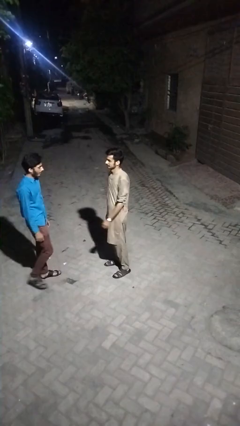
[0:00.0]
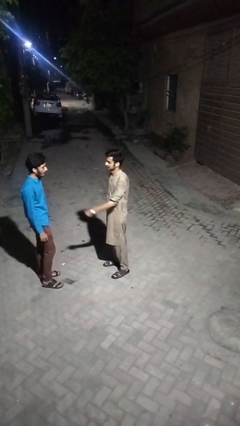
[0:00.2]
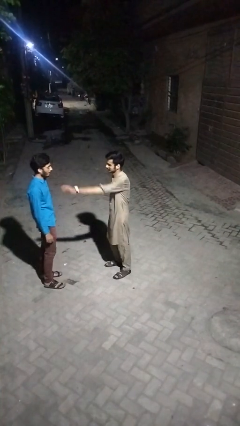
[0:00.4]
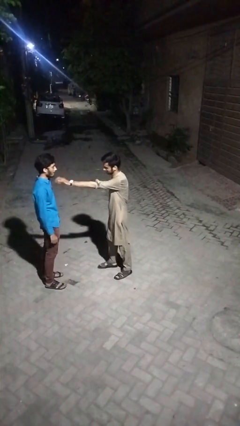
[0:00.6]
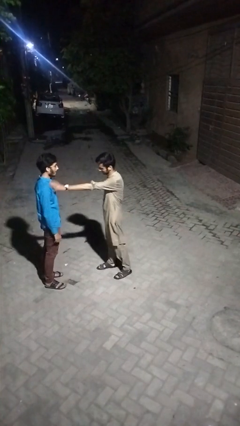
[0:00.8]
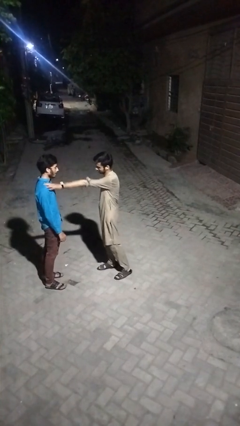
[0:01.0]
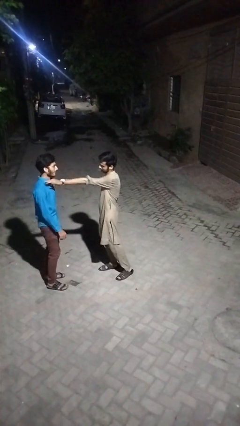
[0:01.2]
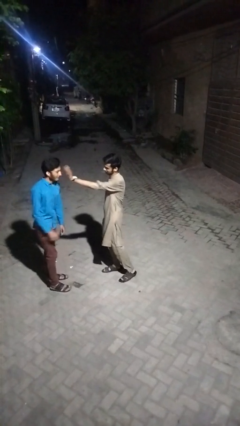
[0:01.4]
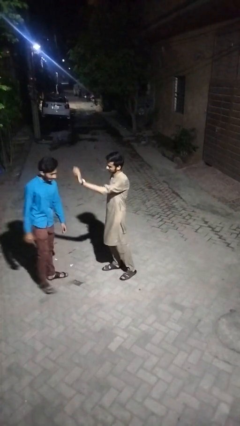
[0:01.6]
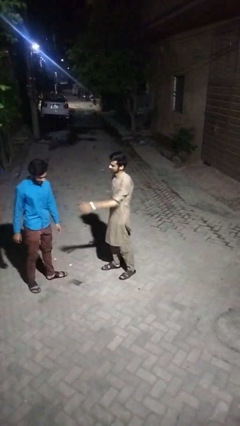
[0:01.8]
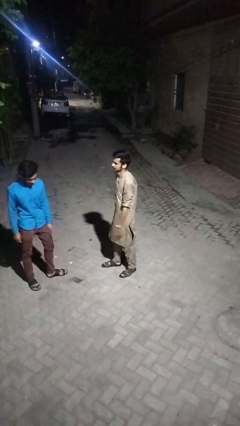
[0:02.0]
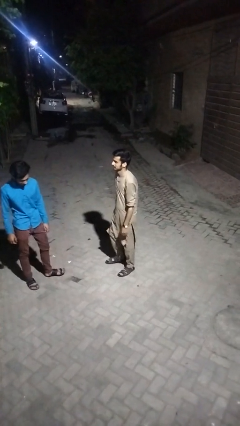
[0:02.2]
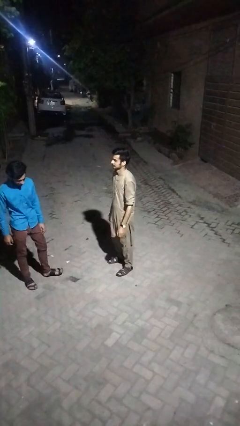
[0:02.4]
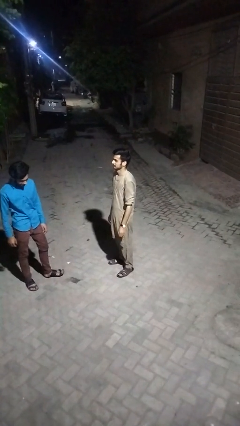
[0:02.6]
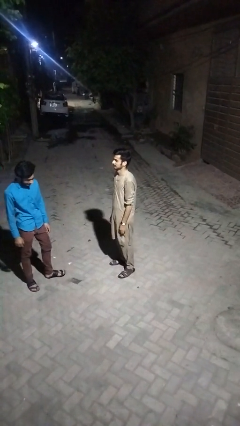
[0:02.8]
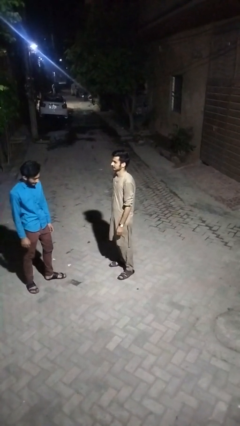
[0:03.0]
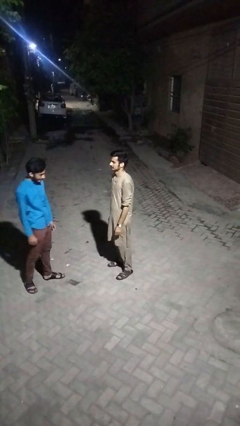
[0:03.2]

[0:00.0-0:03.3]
person shoves person

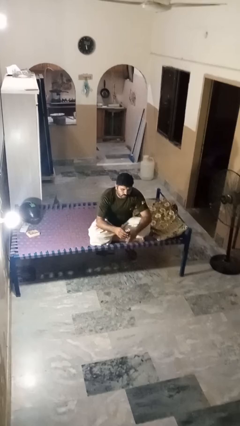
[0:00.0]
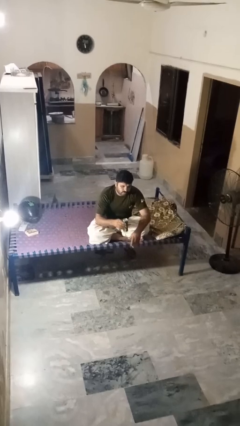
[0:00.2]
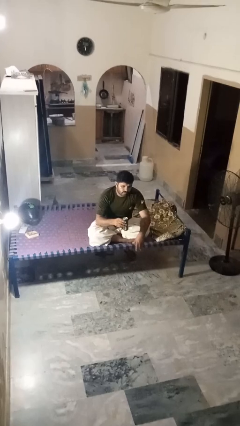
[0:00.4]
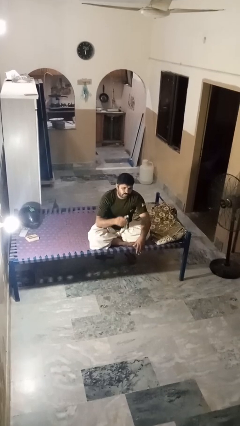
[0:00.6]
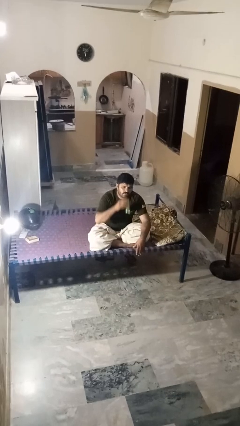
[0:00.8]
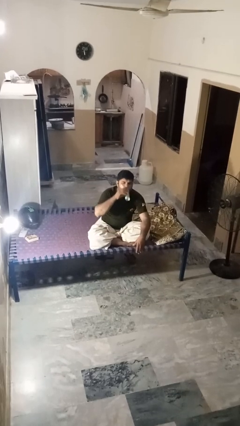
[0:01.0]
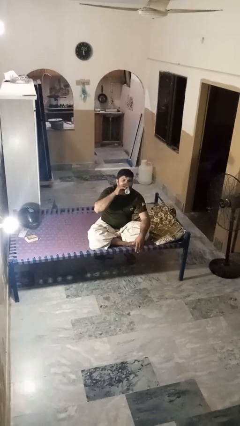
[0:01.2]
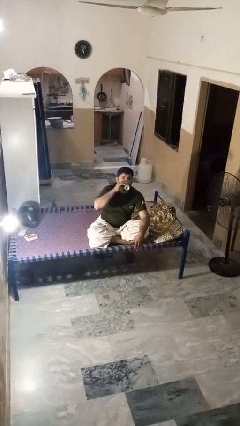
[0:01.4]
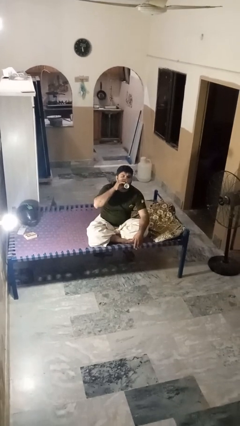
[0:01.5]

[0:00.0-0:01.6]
person drinks from beverage can

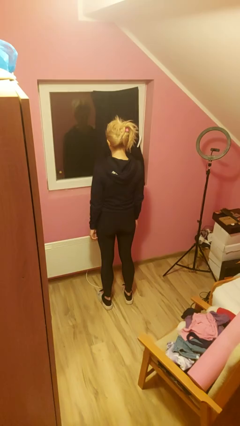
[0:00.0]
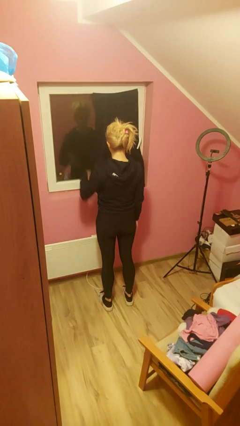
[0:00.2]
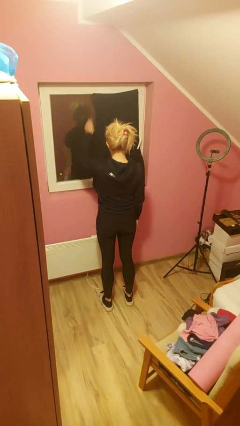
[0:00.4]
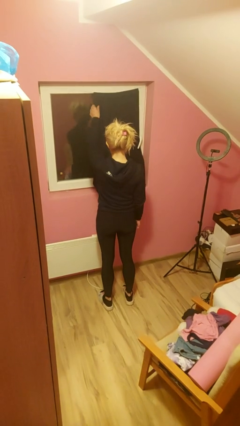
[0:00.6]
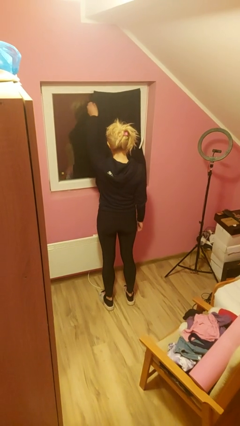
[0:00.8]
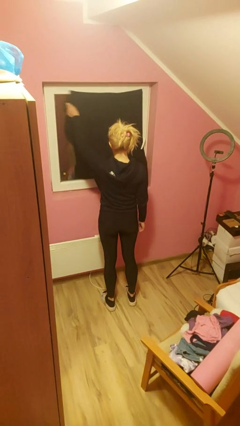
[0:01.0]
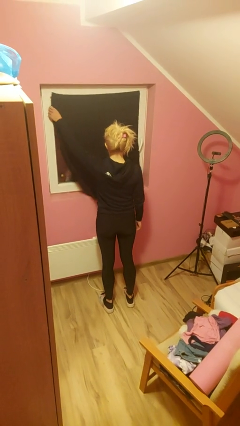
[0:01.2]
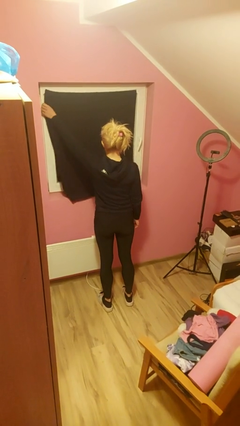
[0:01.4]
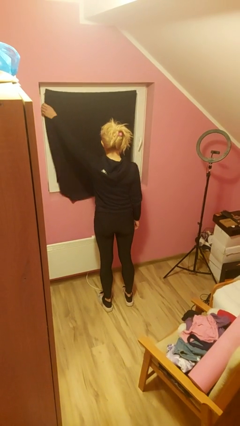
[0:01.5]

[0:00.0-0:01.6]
person closes curtains

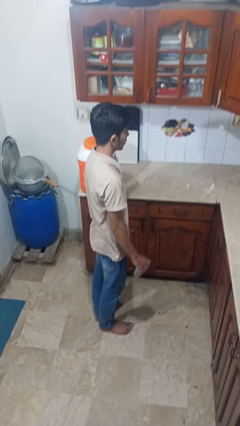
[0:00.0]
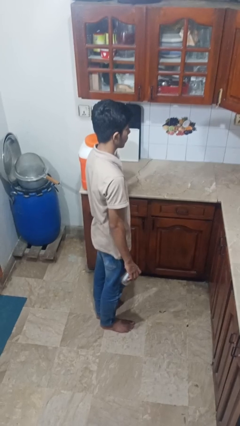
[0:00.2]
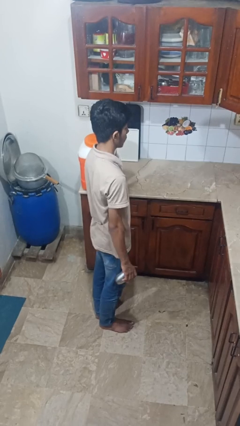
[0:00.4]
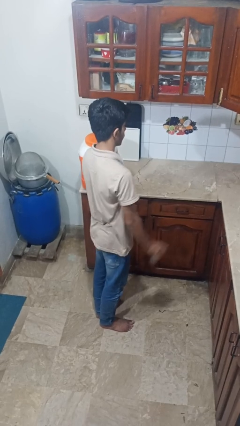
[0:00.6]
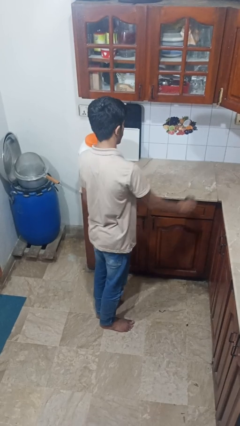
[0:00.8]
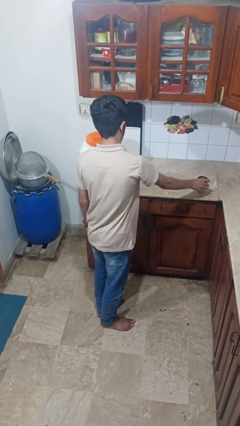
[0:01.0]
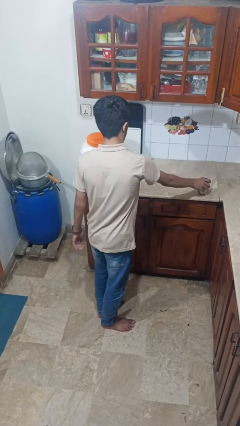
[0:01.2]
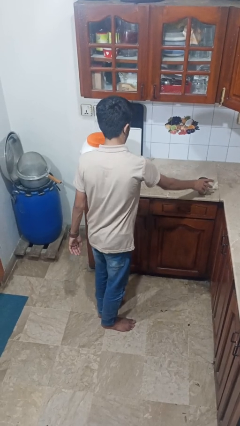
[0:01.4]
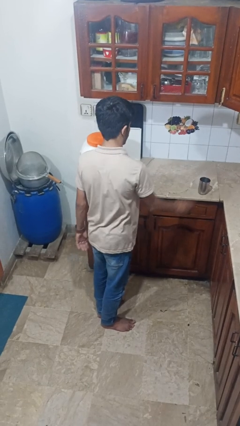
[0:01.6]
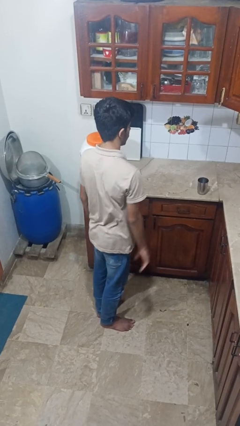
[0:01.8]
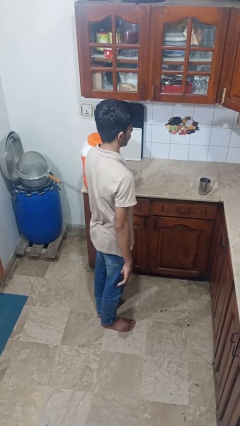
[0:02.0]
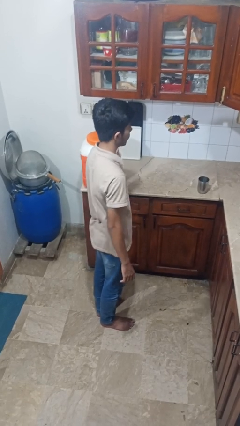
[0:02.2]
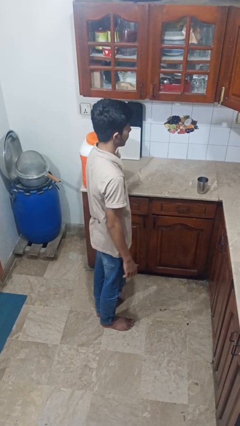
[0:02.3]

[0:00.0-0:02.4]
person puts down object on countertop

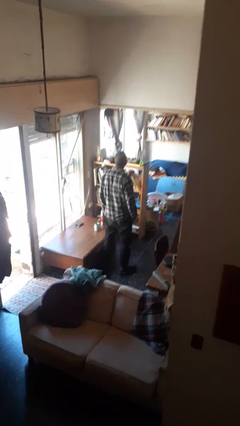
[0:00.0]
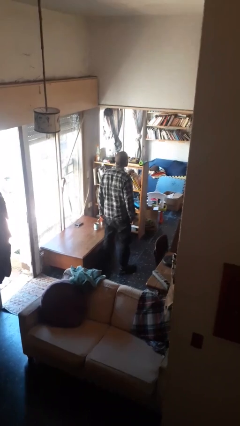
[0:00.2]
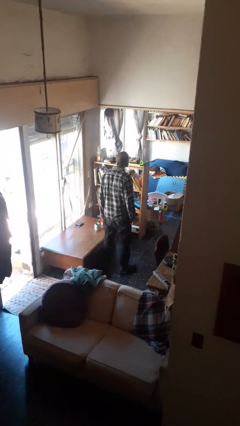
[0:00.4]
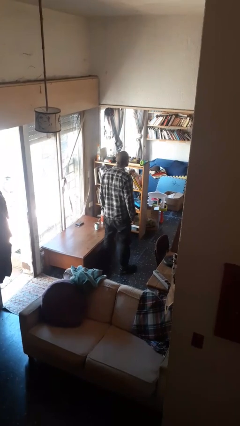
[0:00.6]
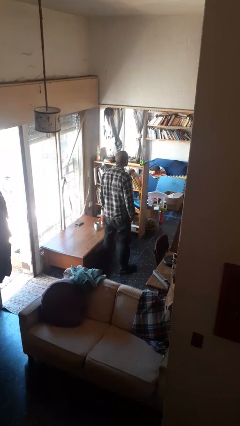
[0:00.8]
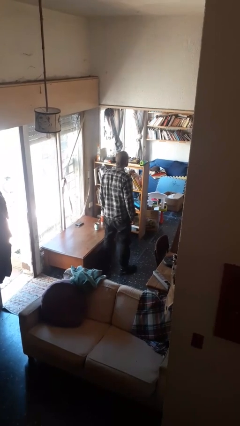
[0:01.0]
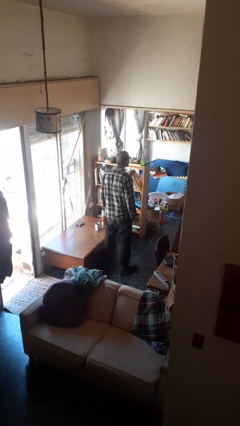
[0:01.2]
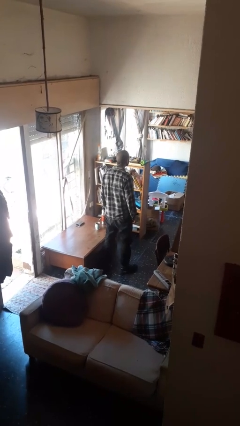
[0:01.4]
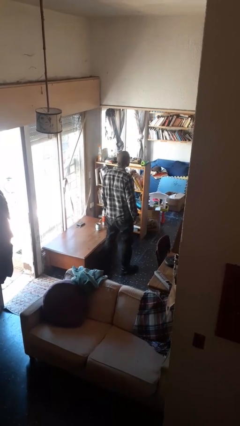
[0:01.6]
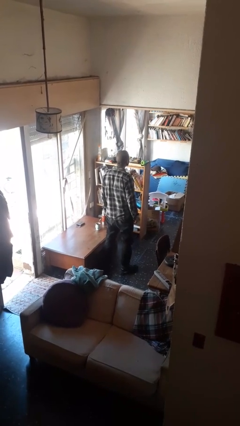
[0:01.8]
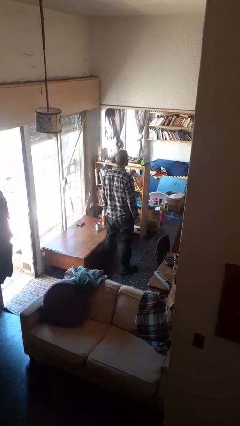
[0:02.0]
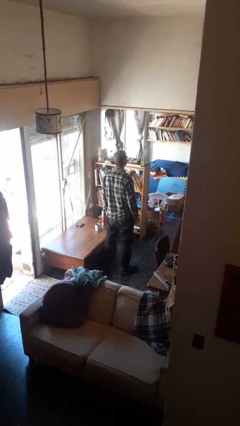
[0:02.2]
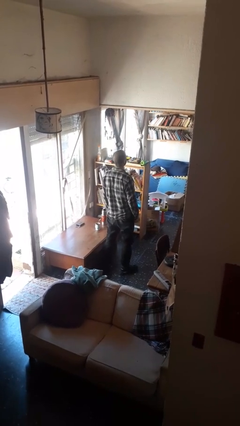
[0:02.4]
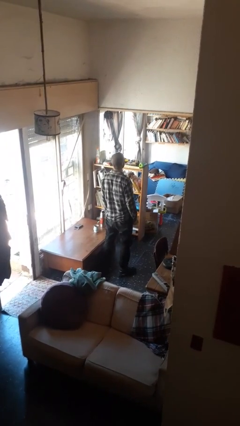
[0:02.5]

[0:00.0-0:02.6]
person sticks out tongue

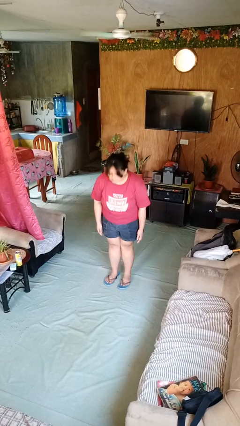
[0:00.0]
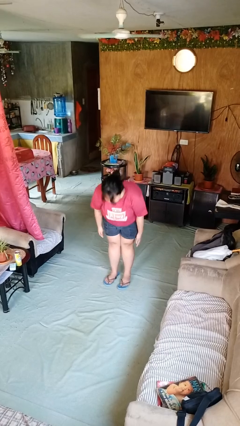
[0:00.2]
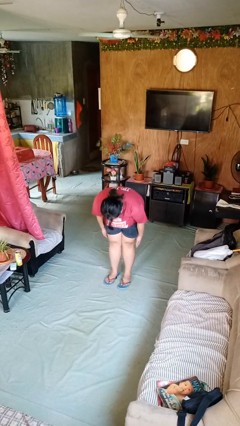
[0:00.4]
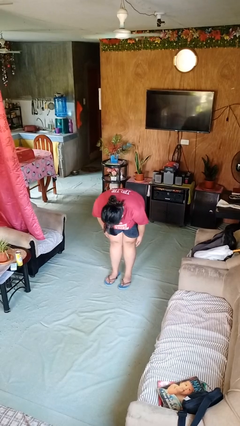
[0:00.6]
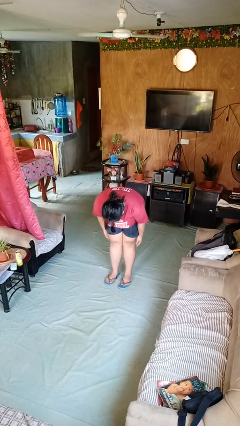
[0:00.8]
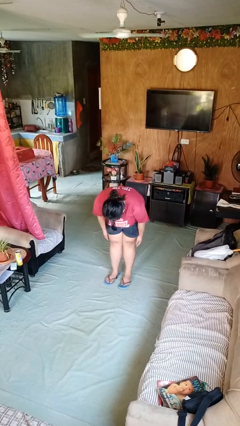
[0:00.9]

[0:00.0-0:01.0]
person bows

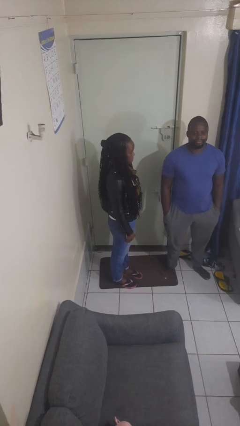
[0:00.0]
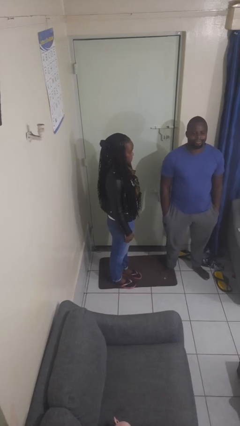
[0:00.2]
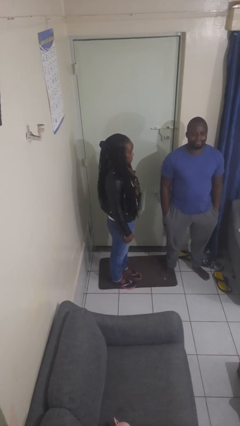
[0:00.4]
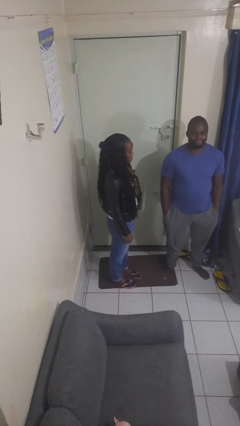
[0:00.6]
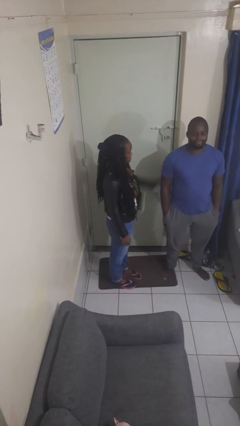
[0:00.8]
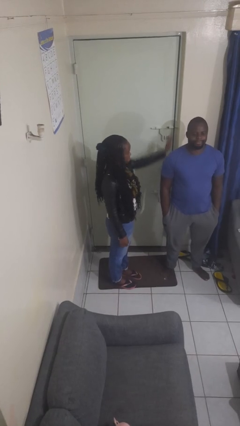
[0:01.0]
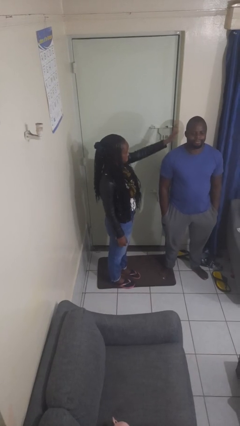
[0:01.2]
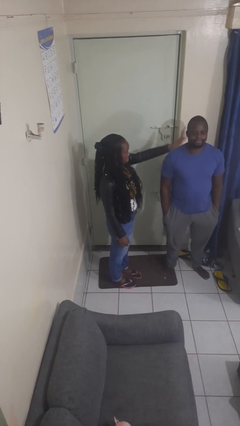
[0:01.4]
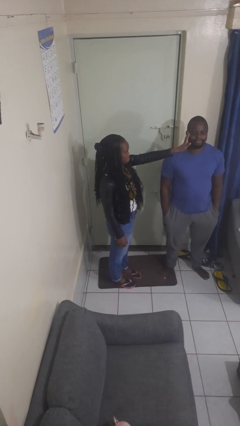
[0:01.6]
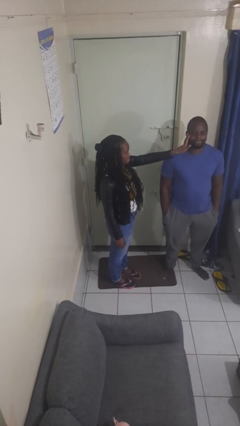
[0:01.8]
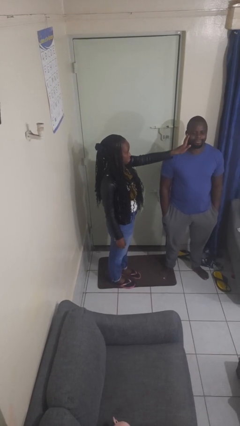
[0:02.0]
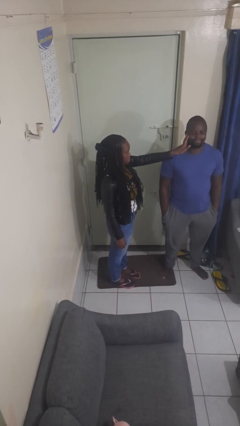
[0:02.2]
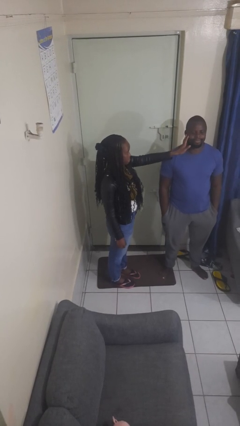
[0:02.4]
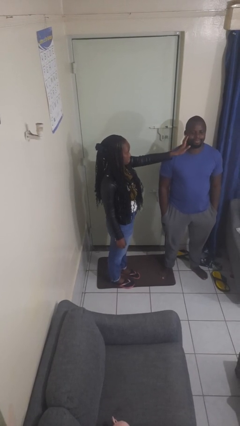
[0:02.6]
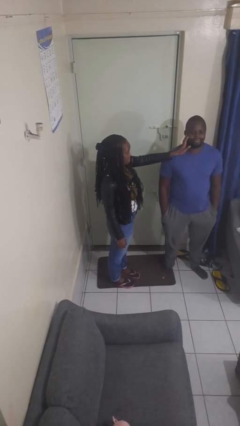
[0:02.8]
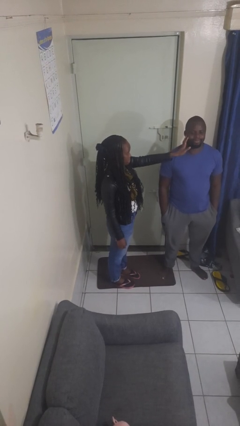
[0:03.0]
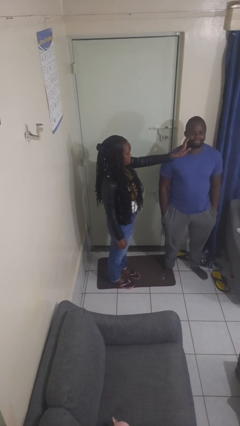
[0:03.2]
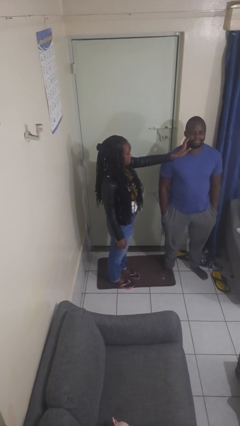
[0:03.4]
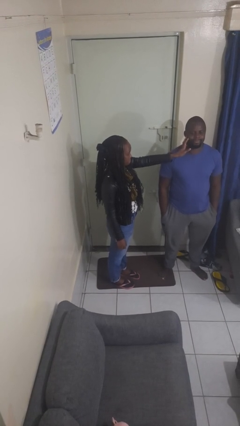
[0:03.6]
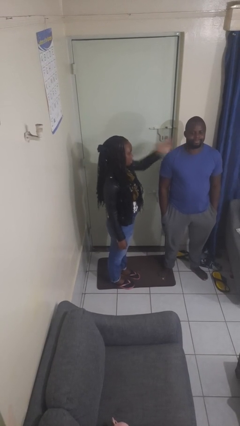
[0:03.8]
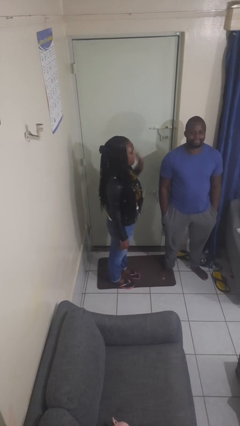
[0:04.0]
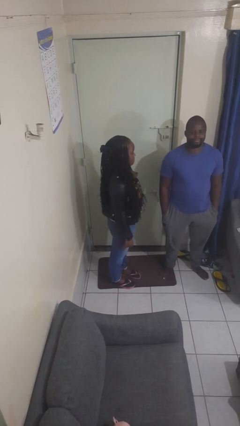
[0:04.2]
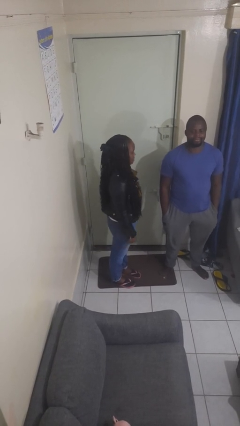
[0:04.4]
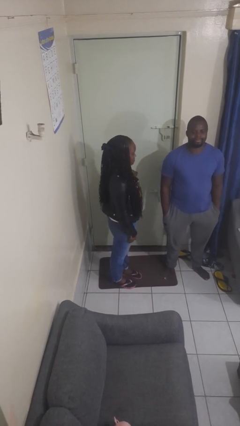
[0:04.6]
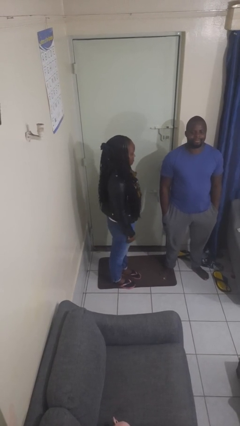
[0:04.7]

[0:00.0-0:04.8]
person touches face of person
